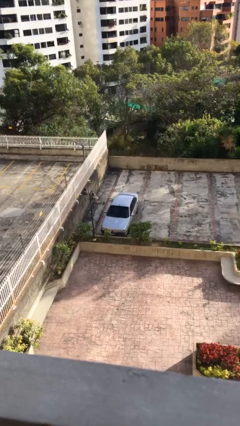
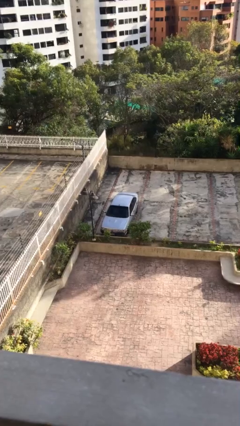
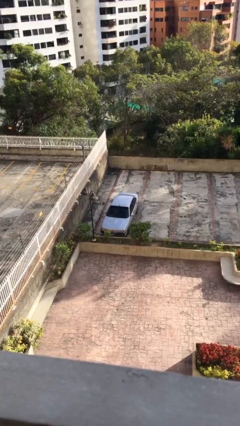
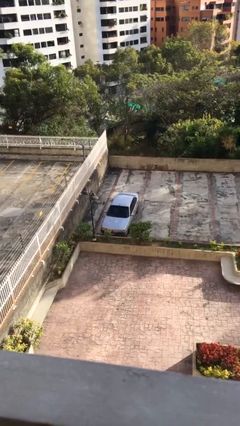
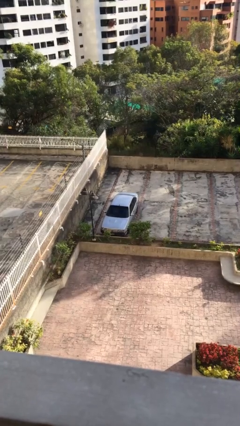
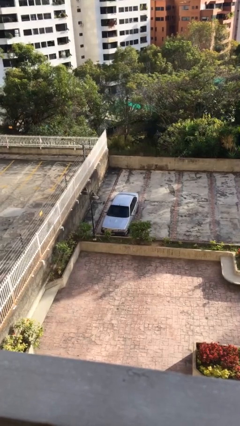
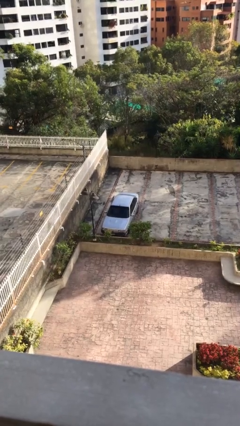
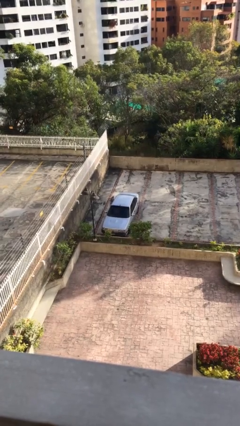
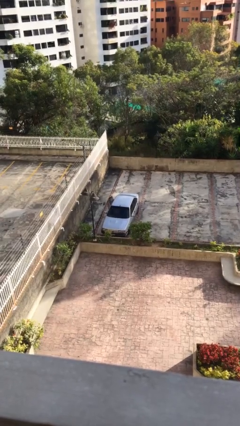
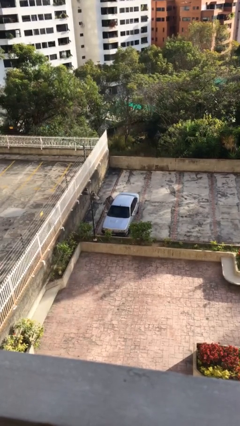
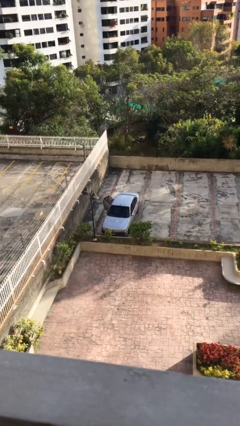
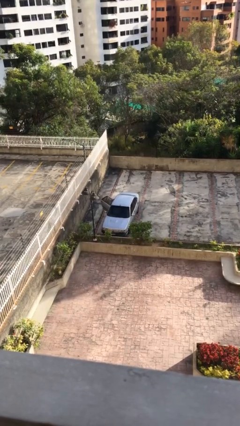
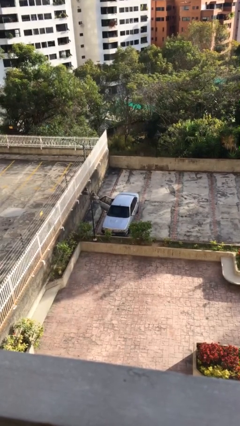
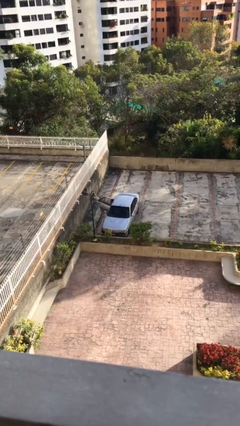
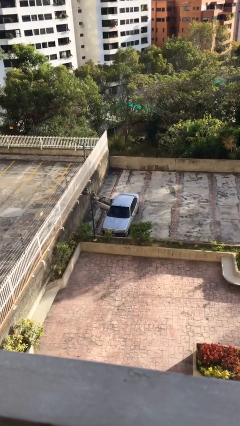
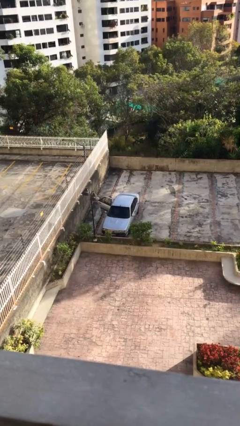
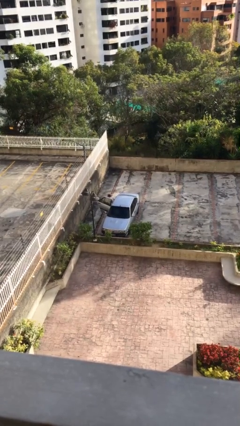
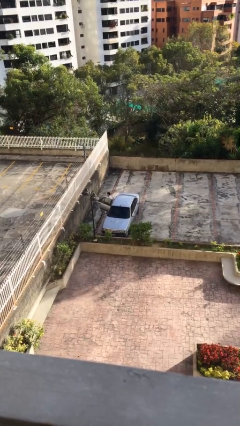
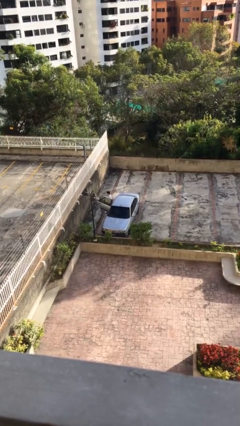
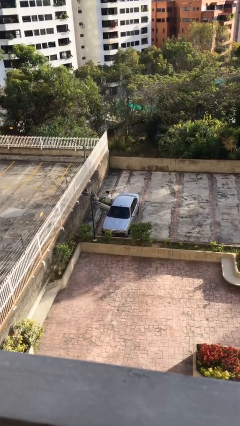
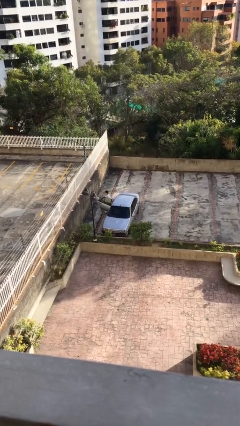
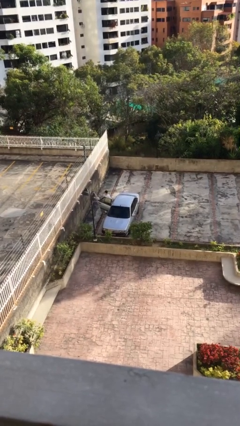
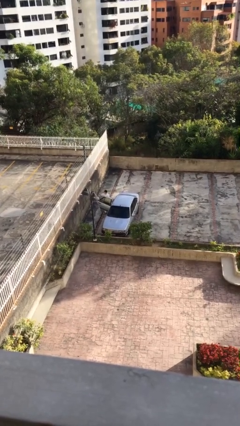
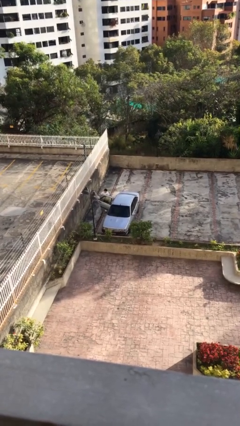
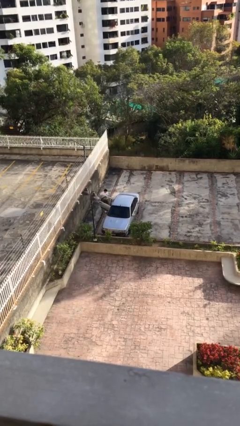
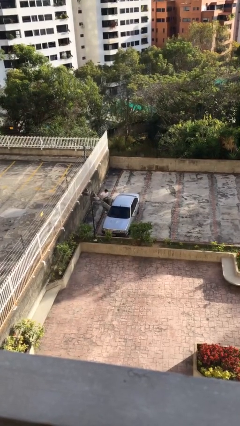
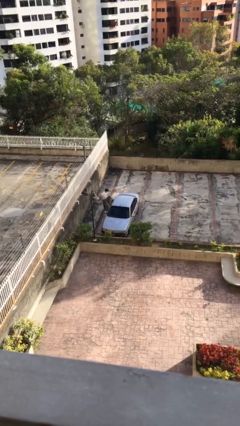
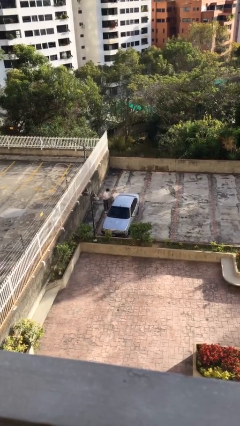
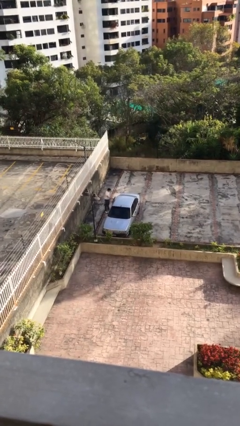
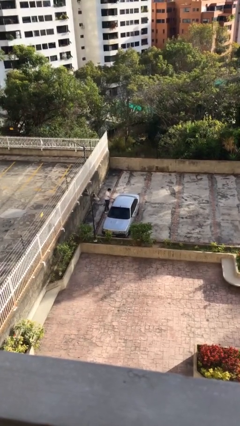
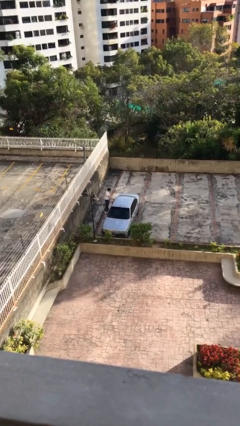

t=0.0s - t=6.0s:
car drops off person

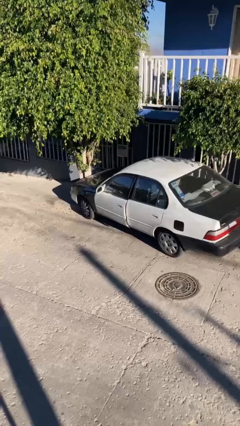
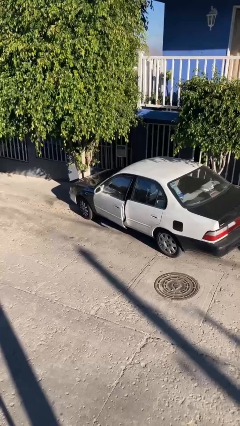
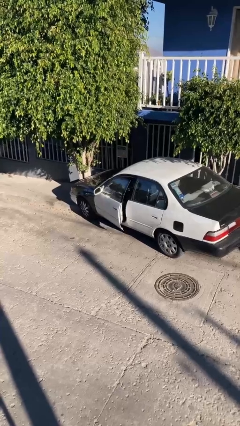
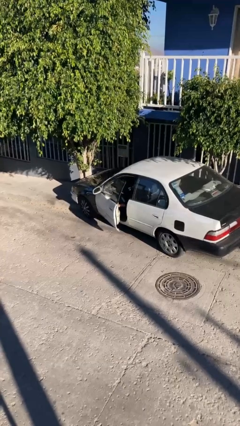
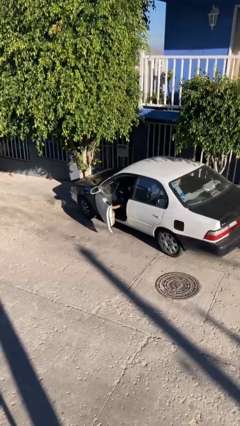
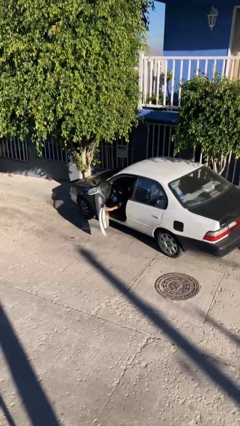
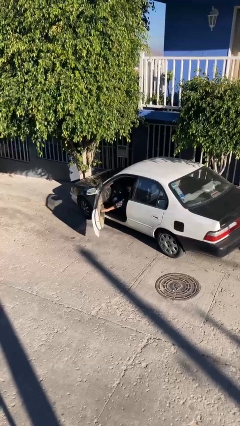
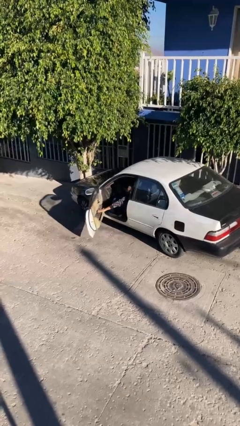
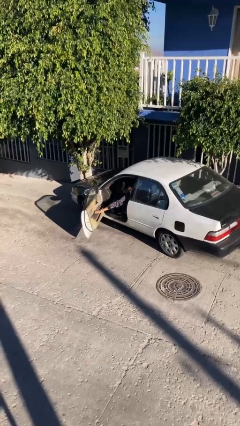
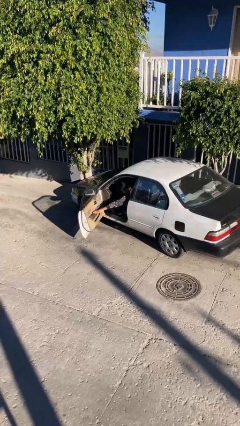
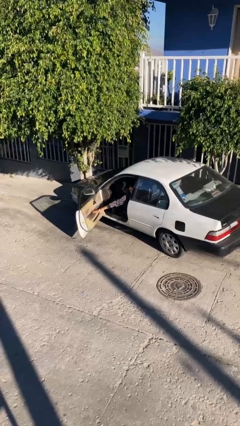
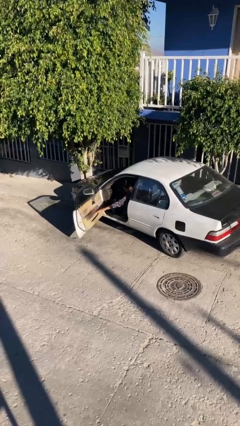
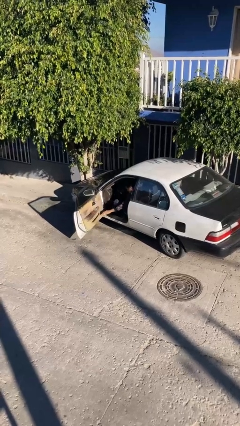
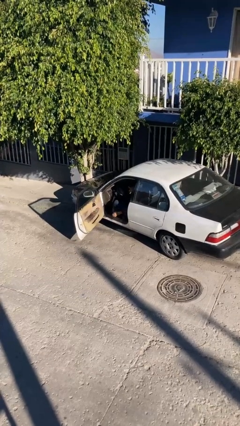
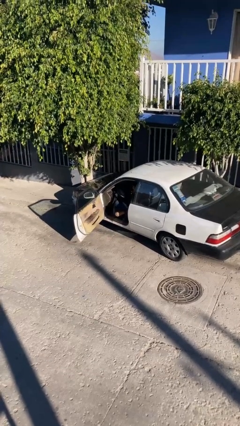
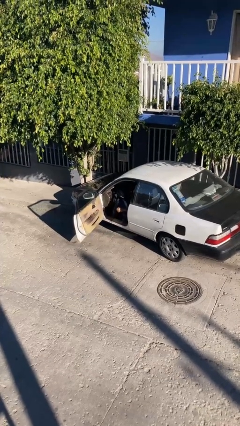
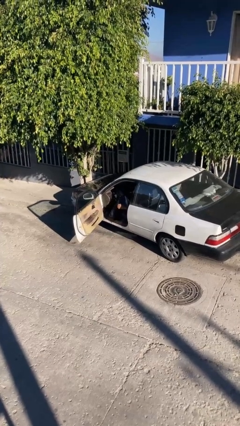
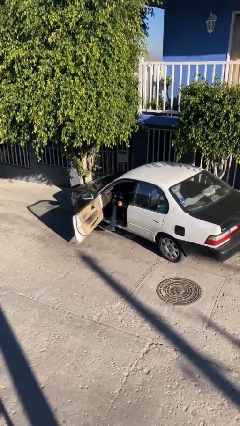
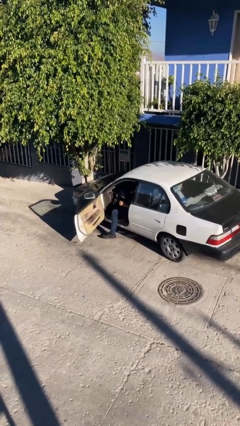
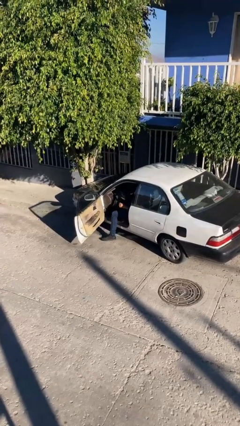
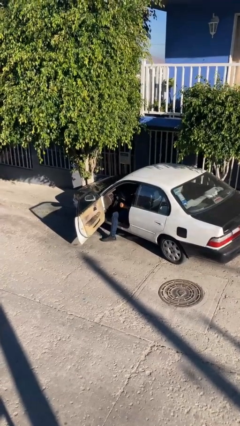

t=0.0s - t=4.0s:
person opens car door

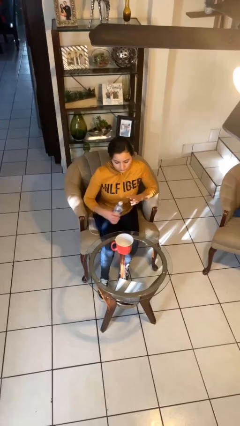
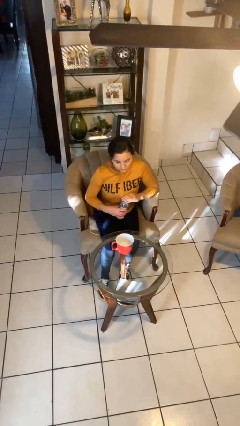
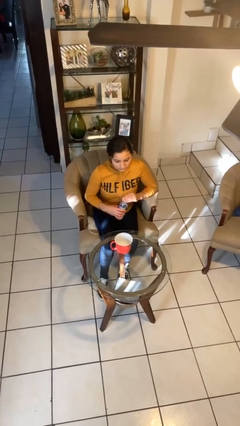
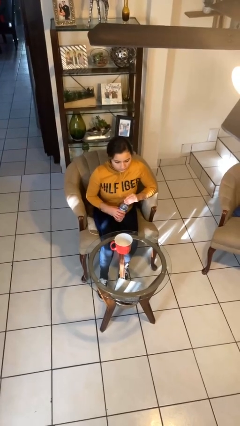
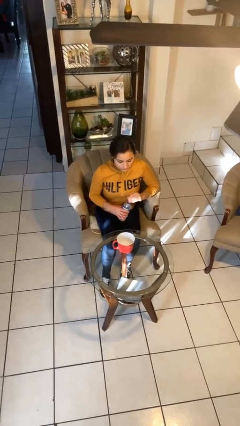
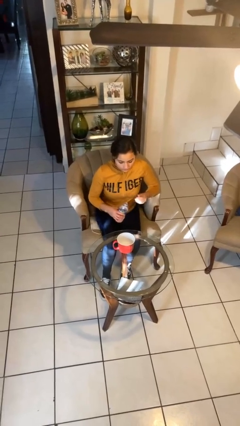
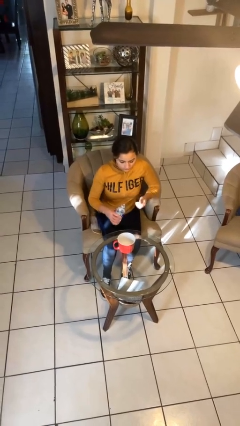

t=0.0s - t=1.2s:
person unscrews lid from bottle

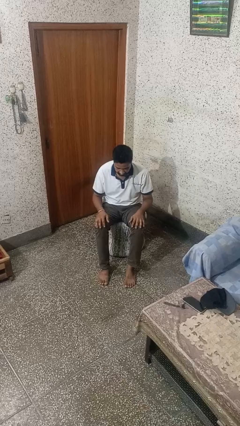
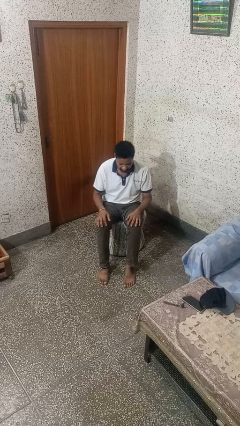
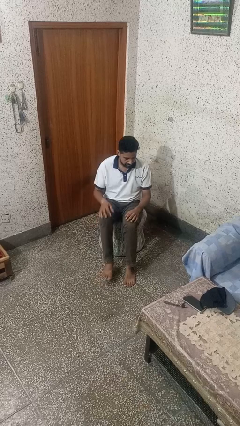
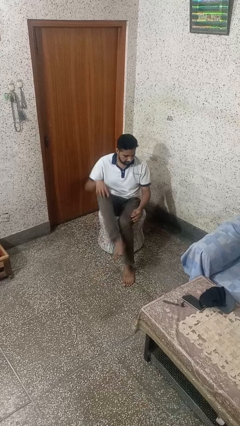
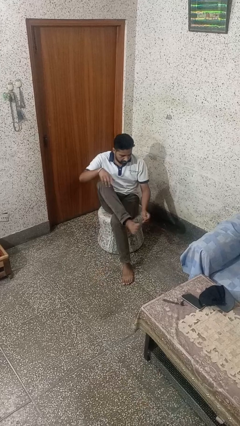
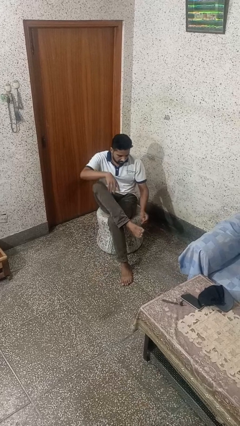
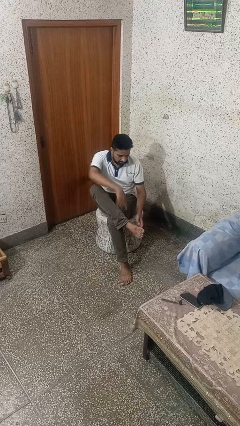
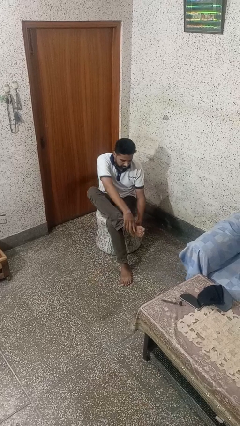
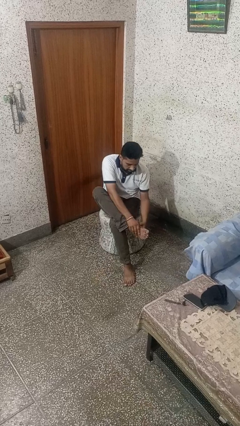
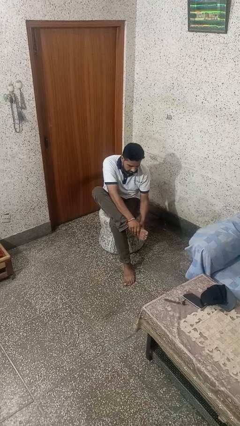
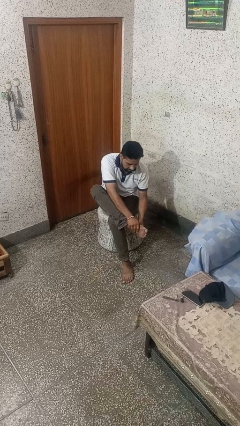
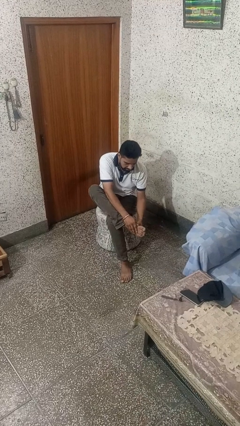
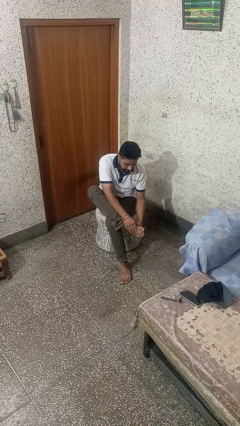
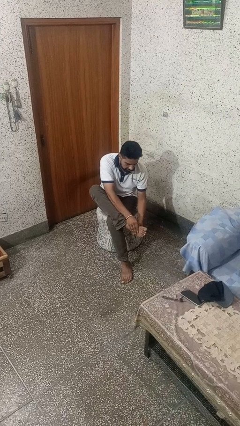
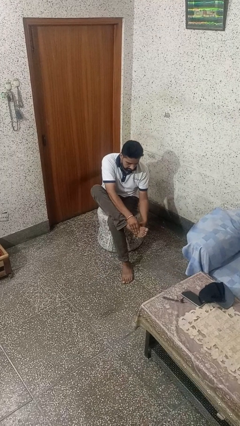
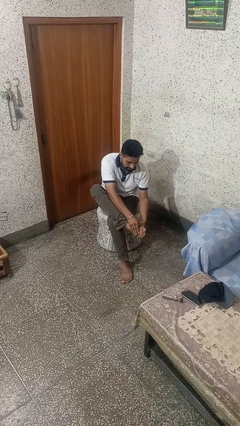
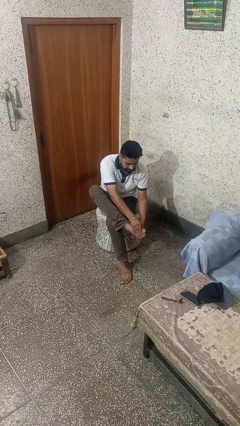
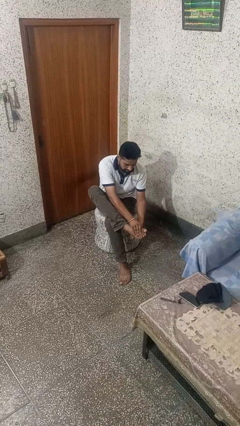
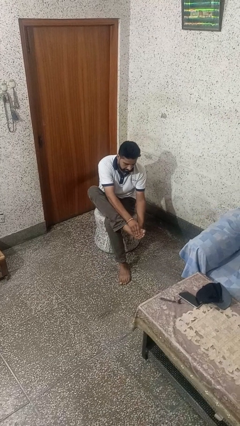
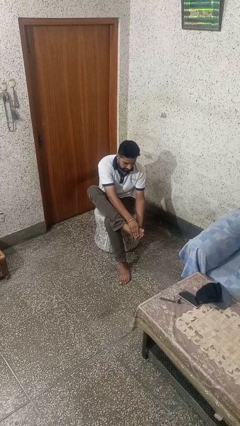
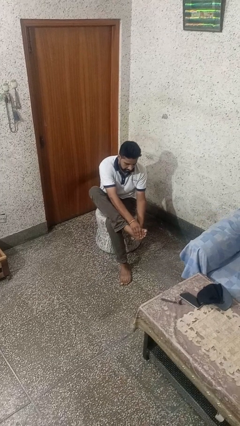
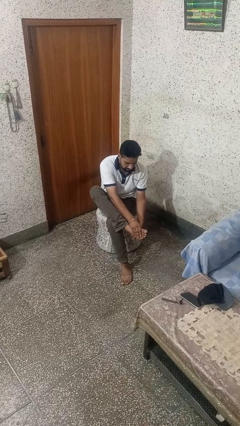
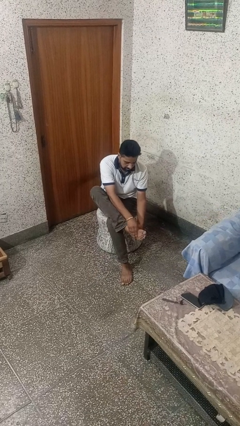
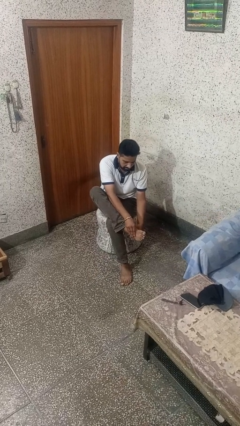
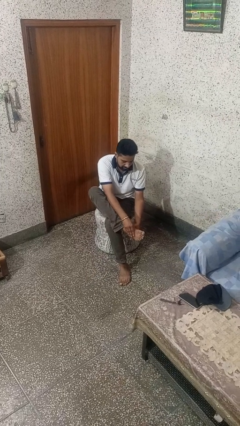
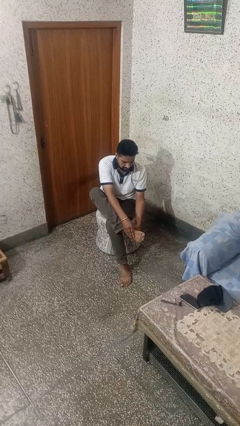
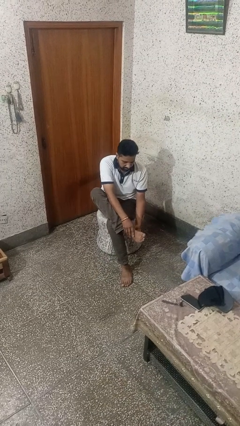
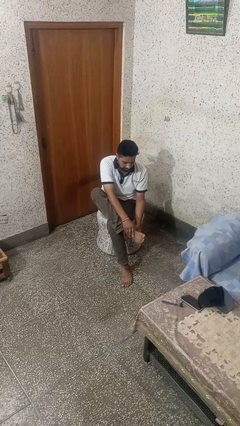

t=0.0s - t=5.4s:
person rubs foot

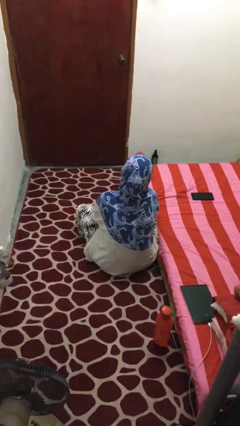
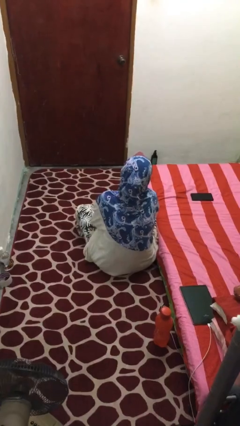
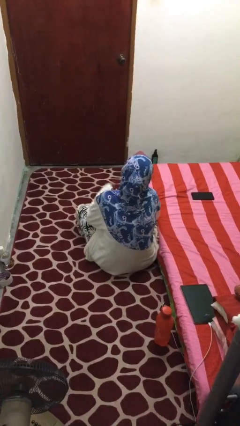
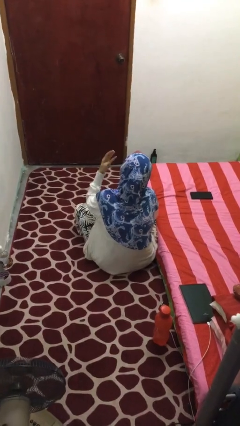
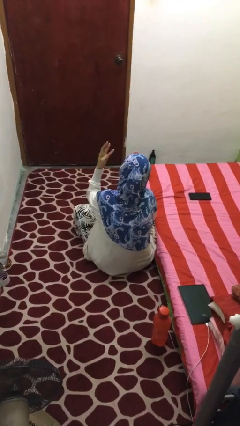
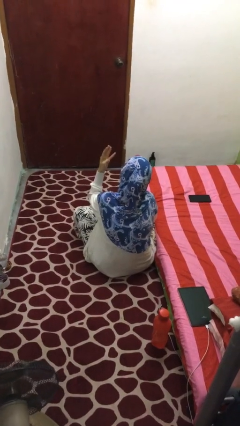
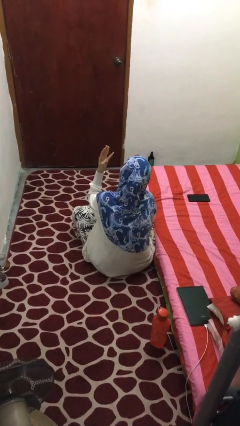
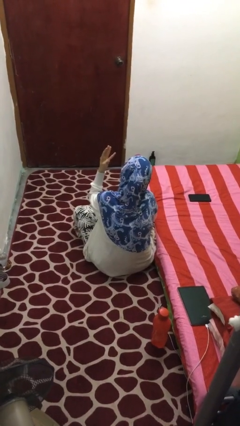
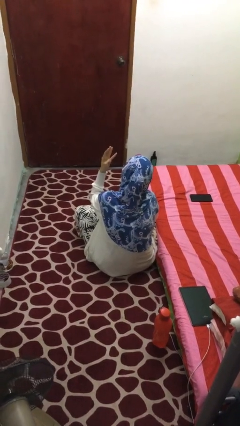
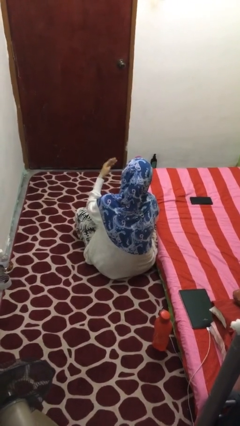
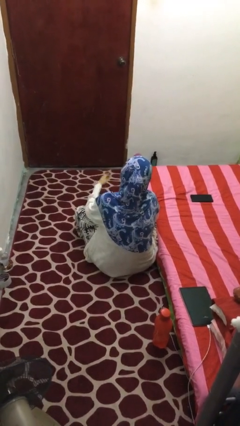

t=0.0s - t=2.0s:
person gestures number four
